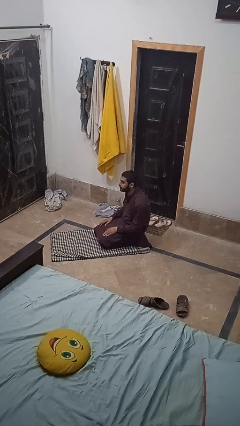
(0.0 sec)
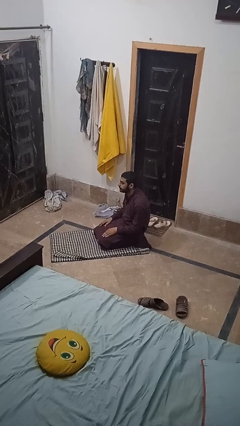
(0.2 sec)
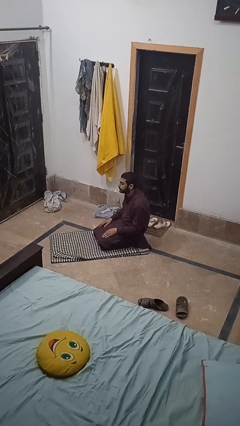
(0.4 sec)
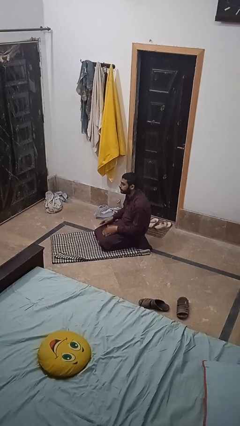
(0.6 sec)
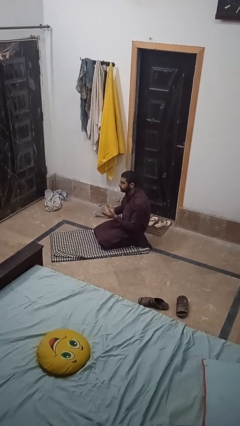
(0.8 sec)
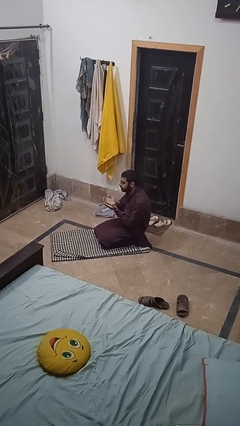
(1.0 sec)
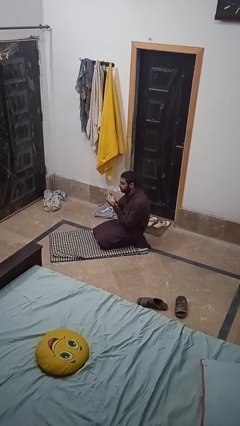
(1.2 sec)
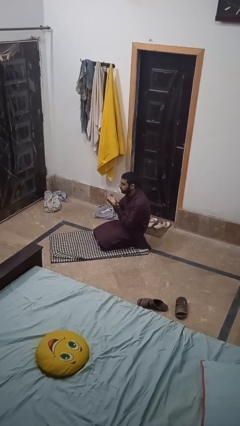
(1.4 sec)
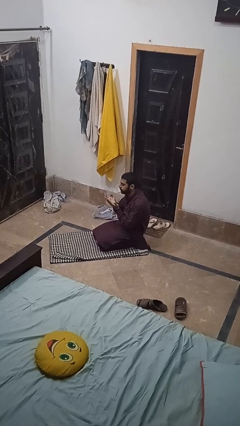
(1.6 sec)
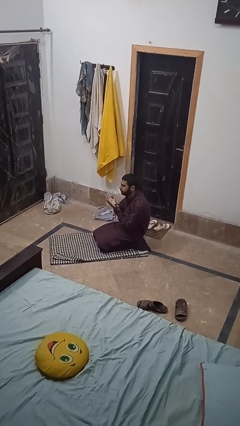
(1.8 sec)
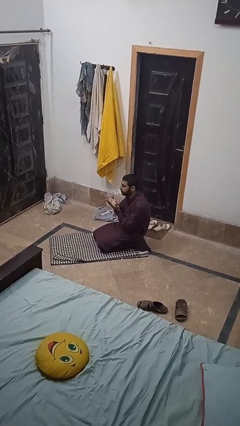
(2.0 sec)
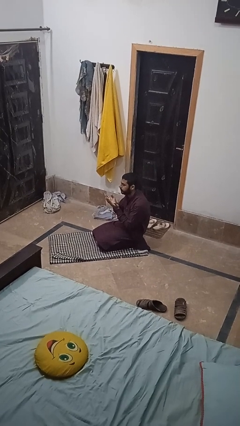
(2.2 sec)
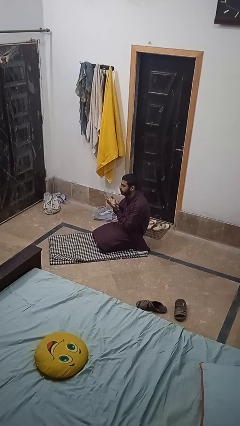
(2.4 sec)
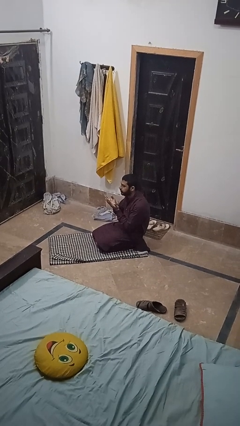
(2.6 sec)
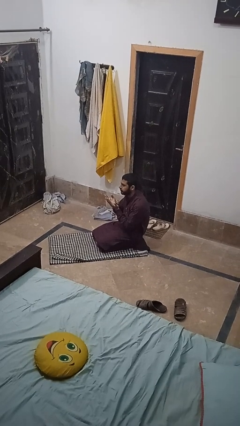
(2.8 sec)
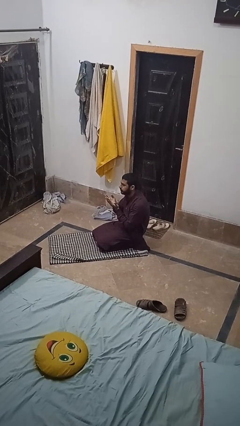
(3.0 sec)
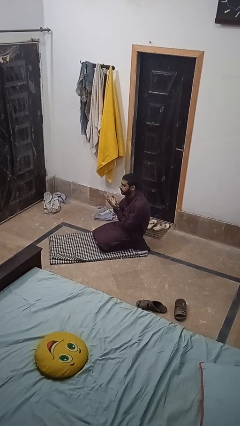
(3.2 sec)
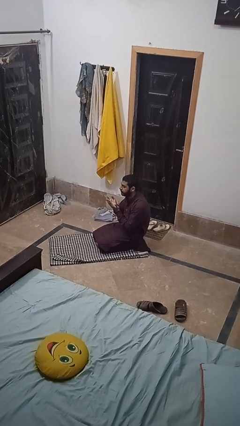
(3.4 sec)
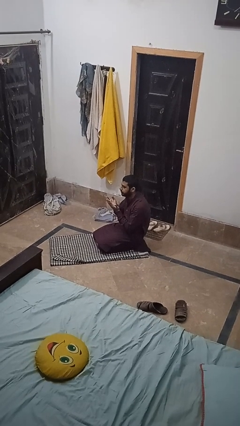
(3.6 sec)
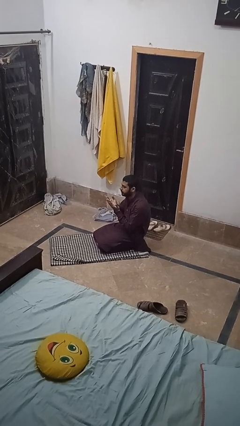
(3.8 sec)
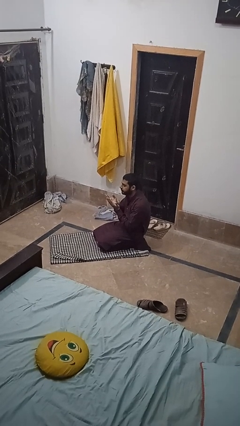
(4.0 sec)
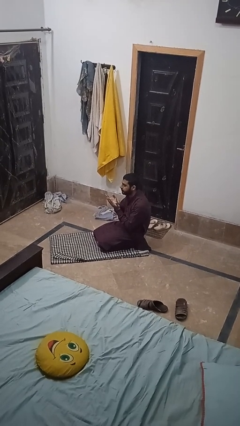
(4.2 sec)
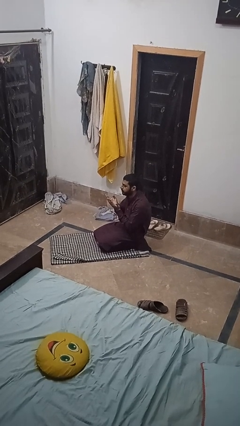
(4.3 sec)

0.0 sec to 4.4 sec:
person prays

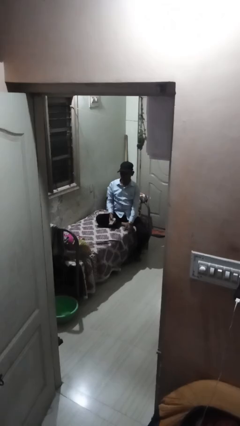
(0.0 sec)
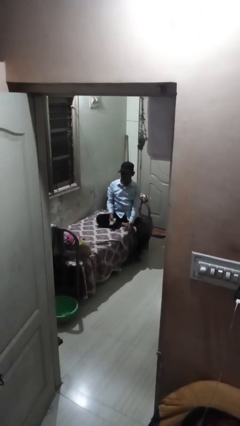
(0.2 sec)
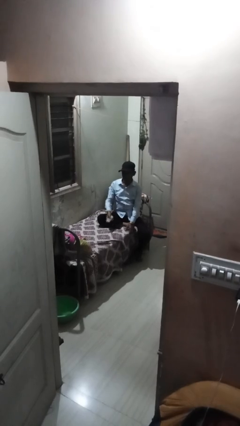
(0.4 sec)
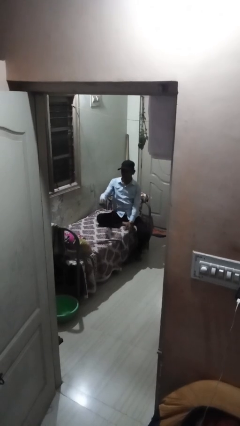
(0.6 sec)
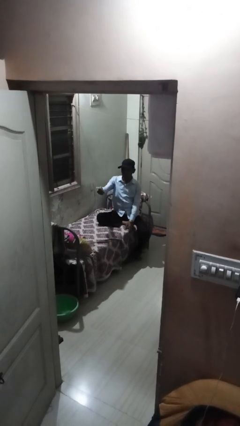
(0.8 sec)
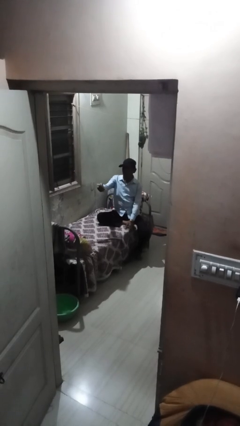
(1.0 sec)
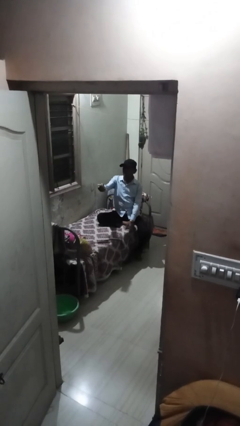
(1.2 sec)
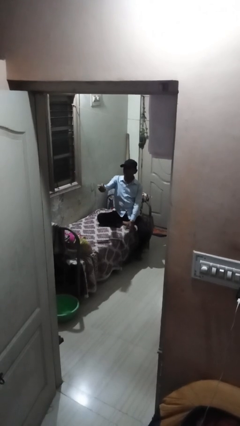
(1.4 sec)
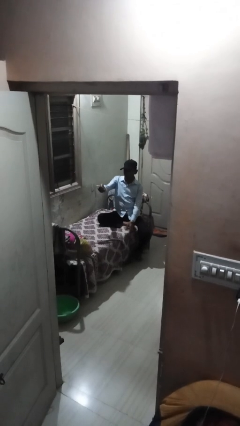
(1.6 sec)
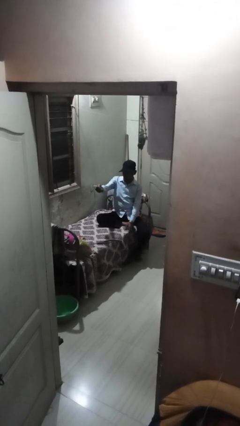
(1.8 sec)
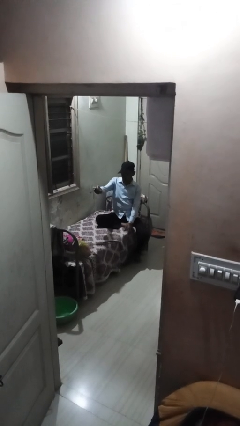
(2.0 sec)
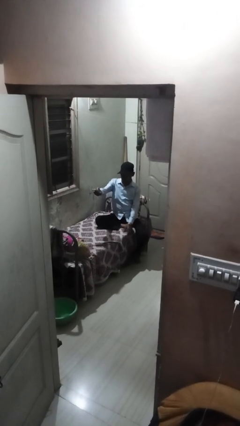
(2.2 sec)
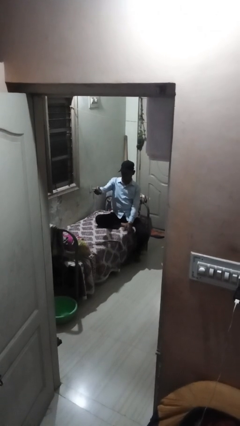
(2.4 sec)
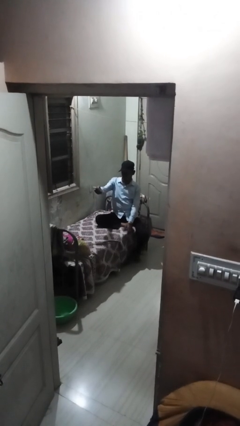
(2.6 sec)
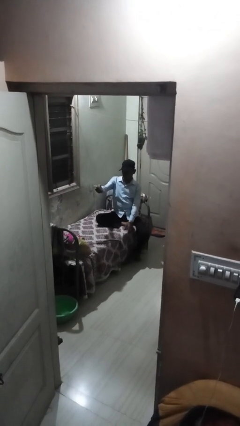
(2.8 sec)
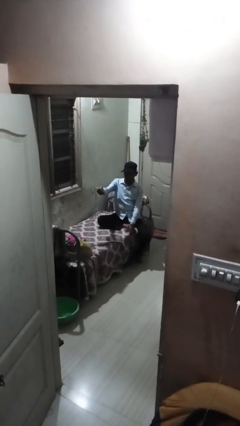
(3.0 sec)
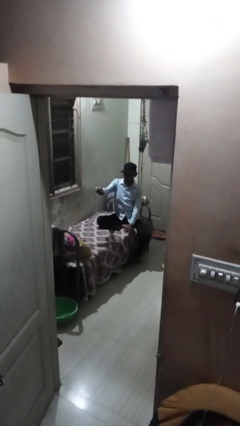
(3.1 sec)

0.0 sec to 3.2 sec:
person uses television remote

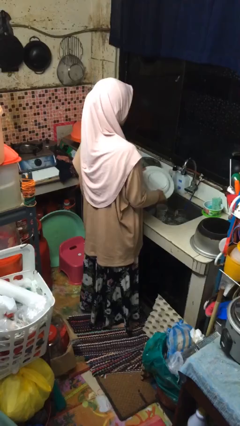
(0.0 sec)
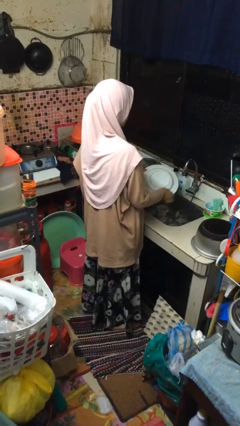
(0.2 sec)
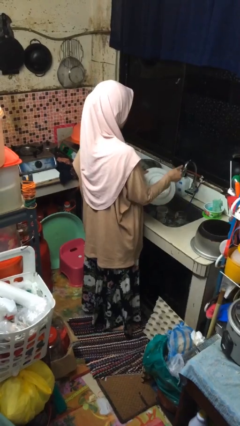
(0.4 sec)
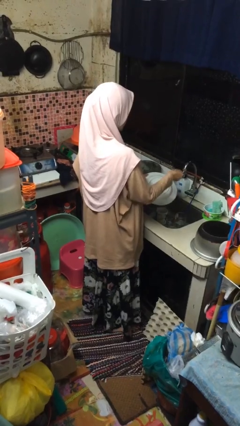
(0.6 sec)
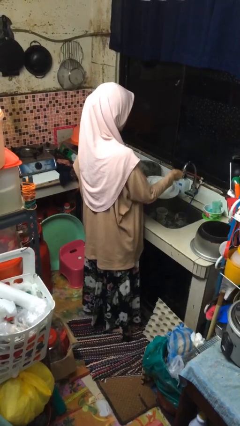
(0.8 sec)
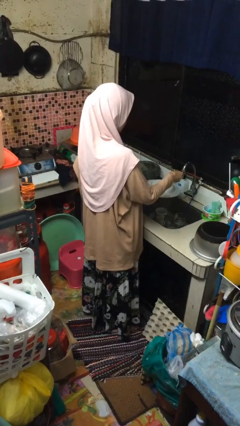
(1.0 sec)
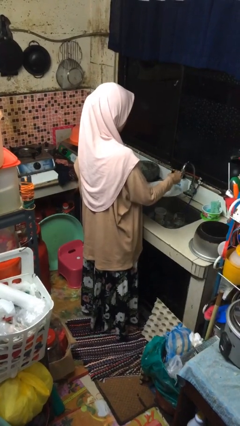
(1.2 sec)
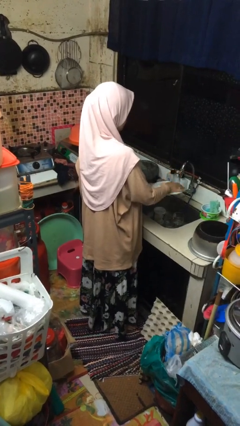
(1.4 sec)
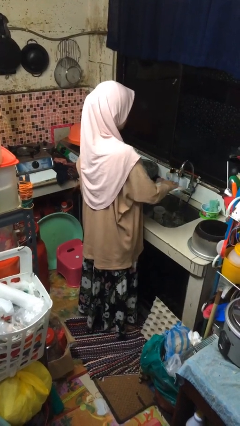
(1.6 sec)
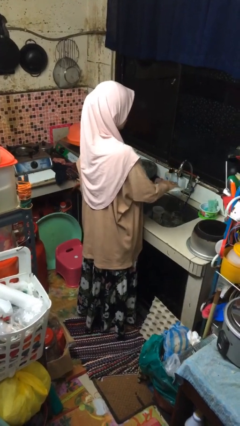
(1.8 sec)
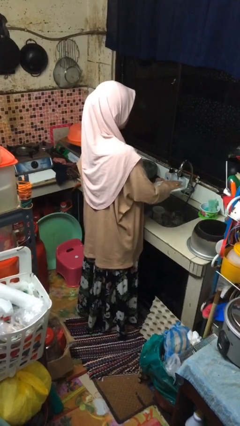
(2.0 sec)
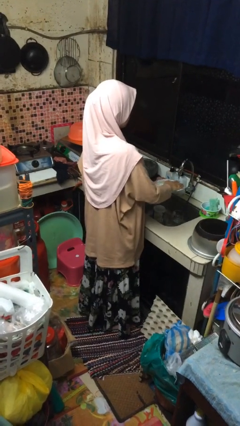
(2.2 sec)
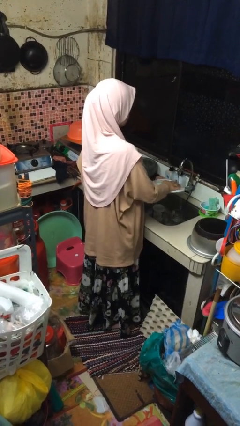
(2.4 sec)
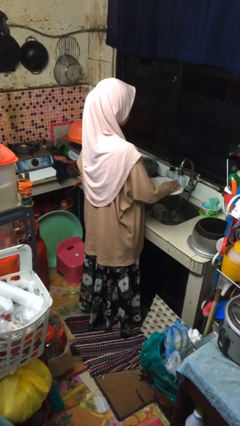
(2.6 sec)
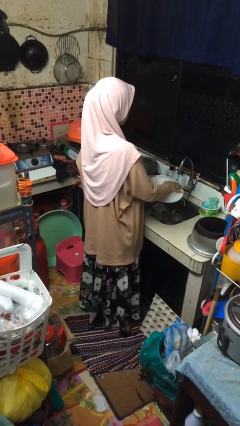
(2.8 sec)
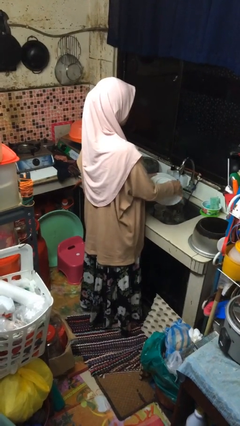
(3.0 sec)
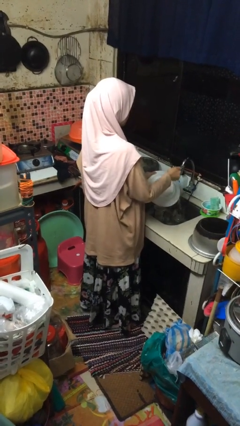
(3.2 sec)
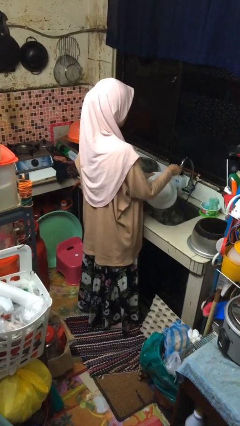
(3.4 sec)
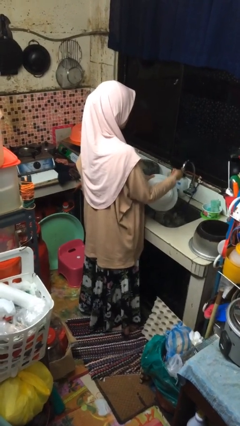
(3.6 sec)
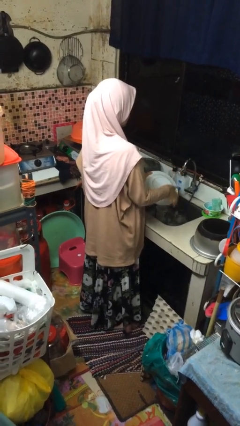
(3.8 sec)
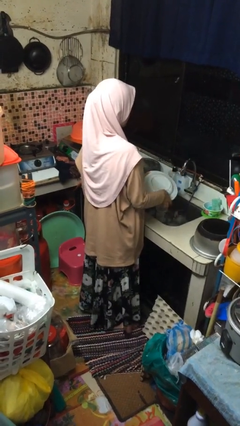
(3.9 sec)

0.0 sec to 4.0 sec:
person washes dish

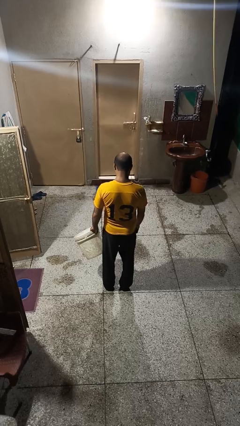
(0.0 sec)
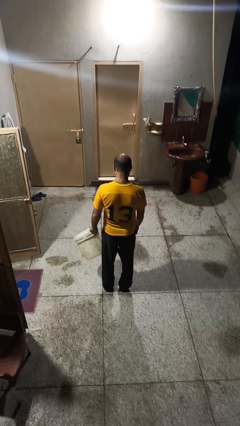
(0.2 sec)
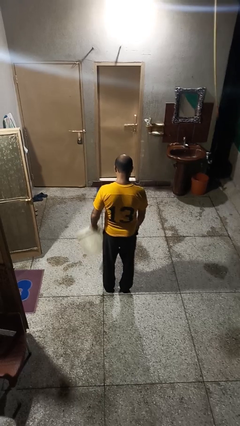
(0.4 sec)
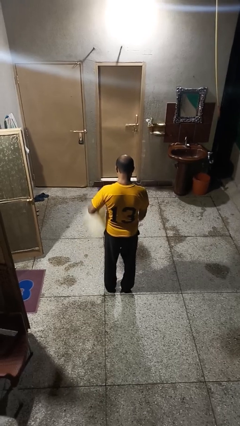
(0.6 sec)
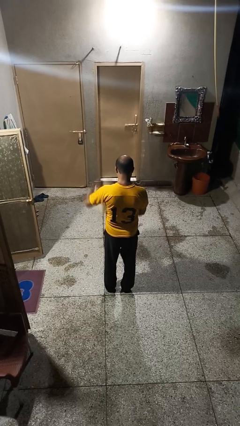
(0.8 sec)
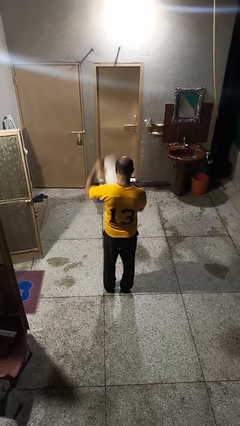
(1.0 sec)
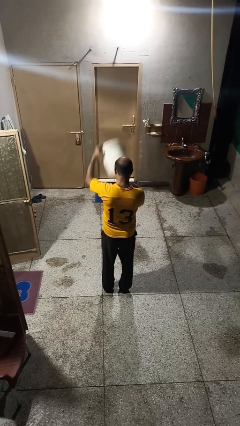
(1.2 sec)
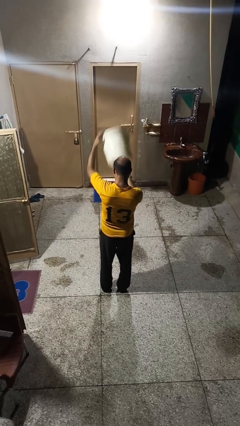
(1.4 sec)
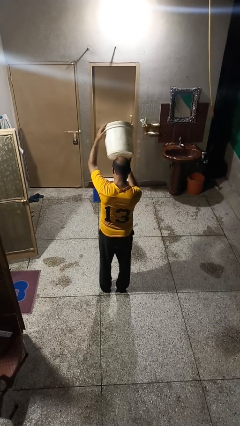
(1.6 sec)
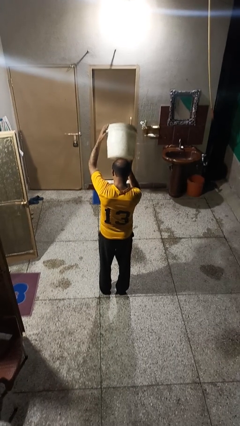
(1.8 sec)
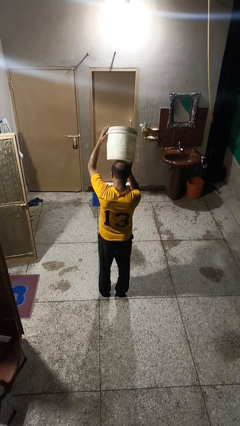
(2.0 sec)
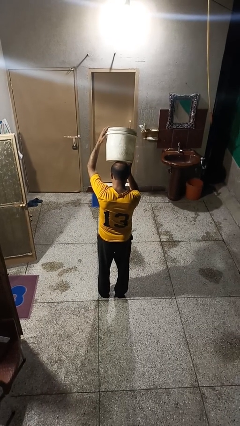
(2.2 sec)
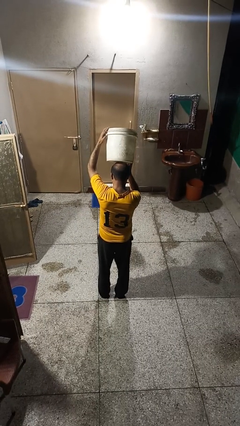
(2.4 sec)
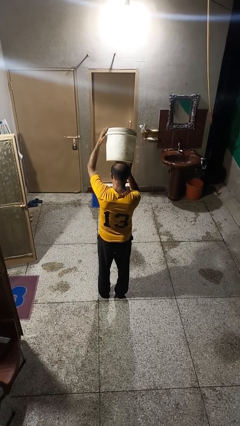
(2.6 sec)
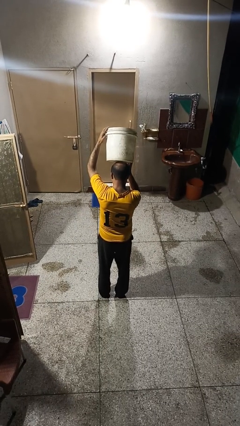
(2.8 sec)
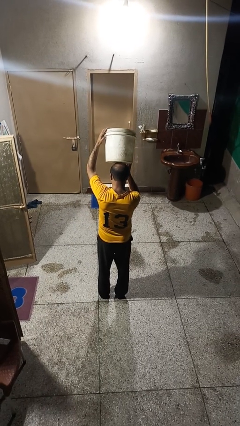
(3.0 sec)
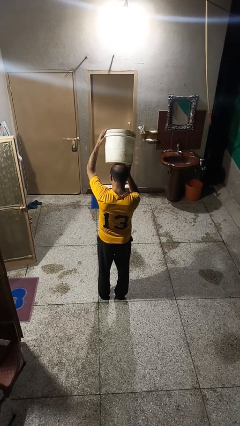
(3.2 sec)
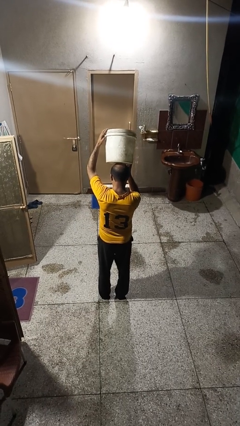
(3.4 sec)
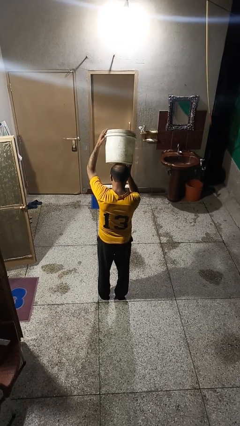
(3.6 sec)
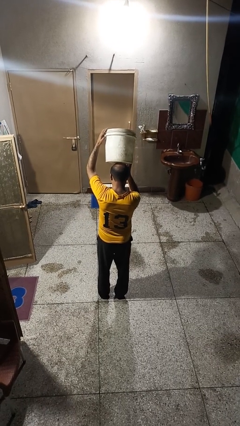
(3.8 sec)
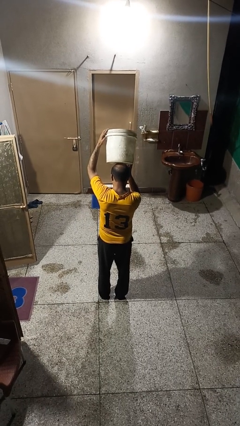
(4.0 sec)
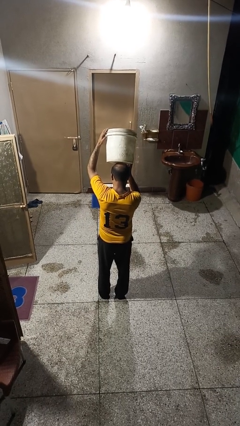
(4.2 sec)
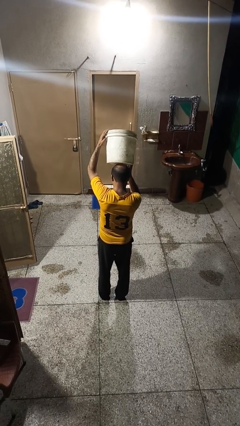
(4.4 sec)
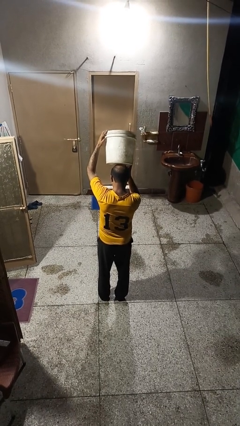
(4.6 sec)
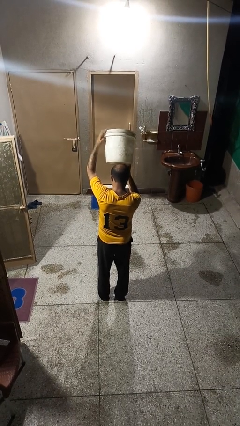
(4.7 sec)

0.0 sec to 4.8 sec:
person holds object above head

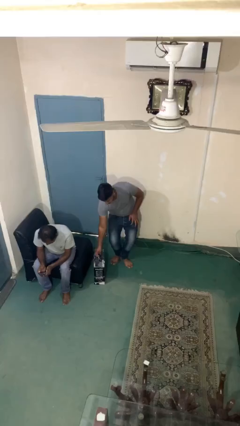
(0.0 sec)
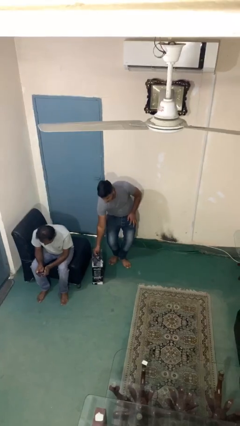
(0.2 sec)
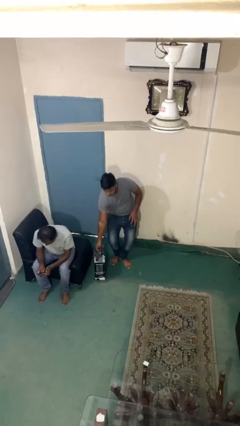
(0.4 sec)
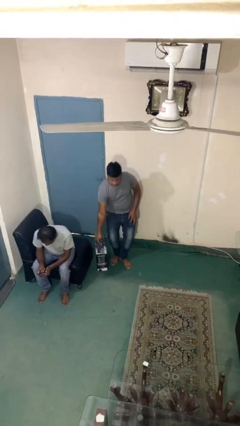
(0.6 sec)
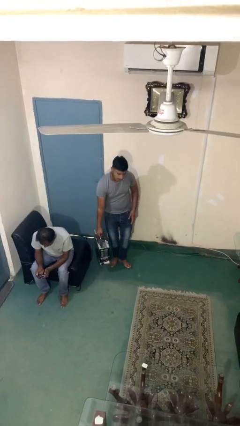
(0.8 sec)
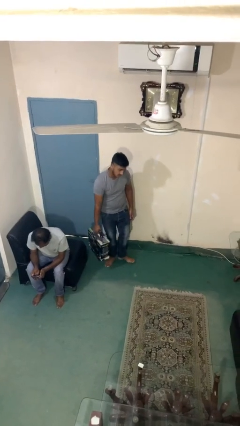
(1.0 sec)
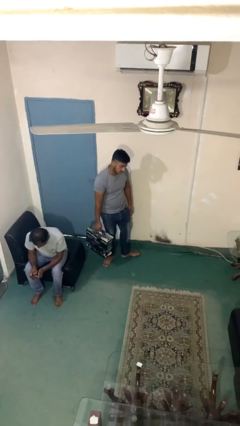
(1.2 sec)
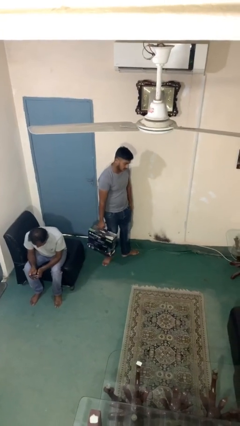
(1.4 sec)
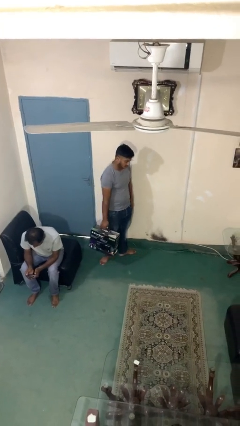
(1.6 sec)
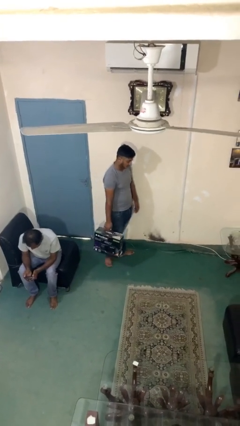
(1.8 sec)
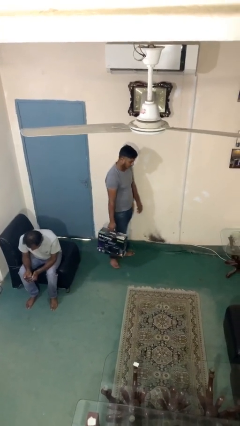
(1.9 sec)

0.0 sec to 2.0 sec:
person steals object from person
